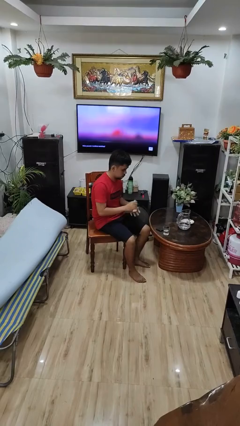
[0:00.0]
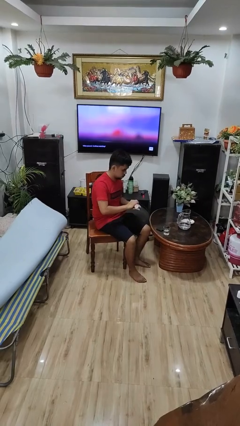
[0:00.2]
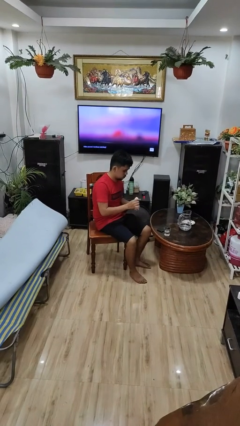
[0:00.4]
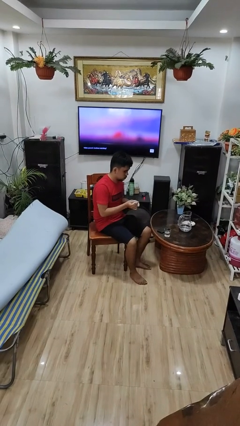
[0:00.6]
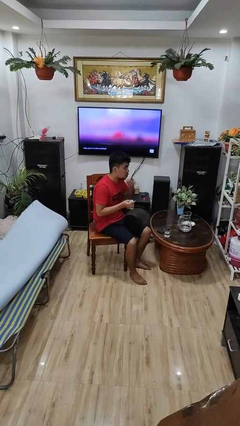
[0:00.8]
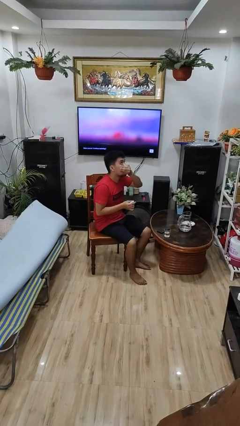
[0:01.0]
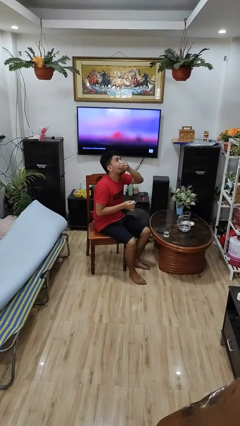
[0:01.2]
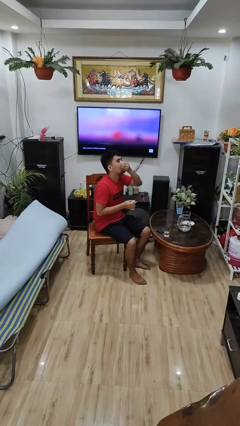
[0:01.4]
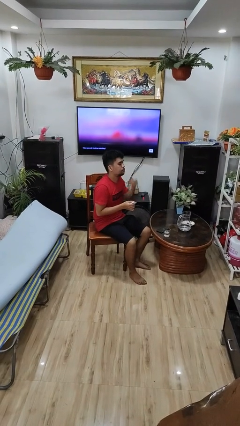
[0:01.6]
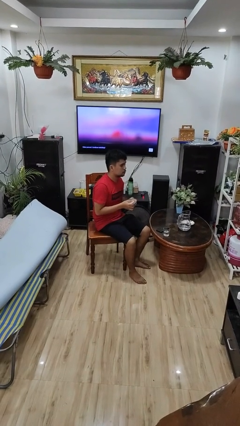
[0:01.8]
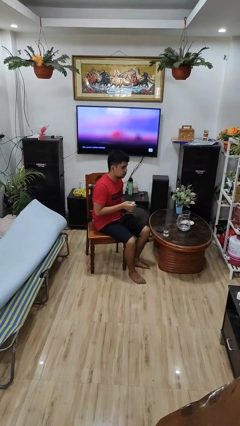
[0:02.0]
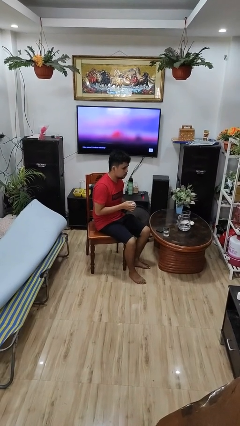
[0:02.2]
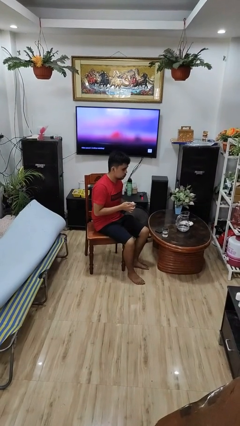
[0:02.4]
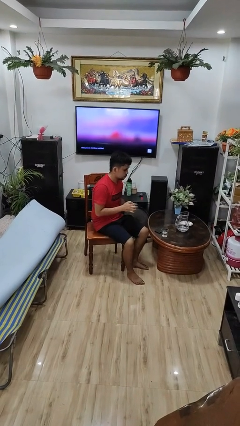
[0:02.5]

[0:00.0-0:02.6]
person takes medicine pills

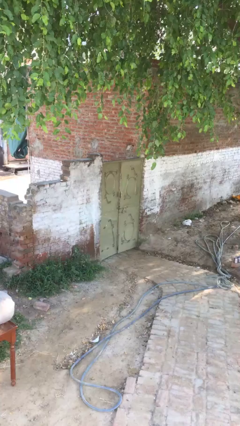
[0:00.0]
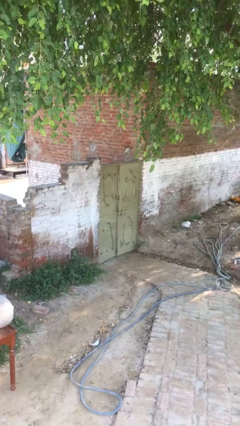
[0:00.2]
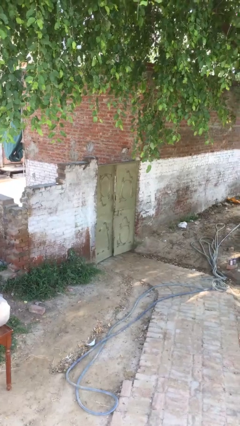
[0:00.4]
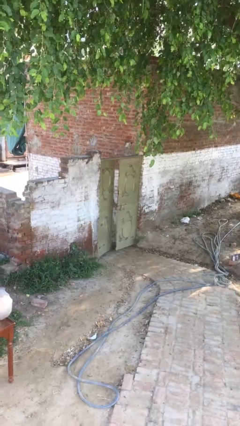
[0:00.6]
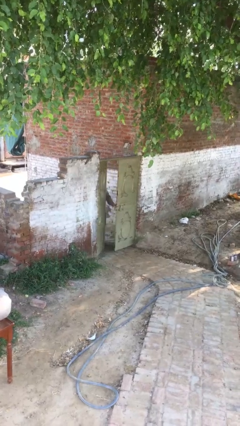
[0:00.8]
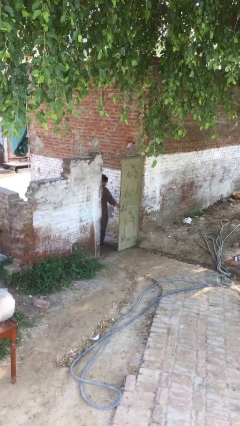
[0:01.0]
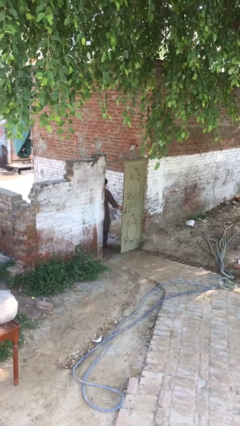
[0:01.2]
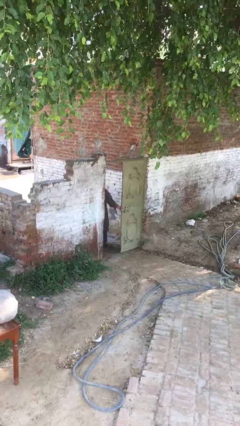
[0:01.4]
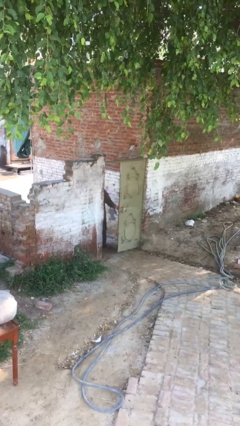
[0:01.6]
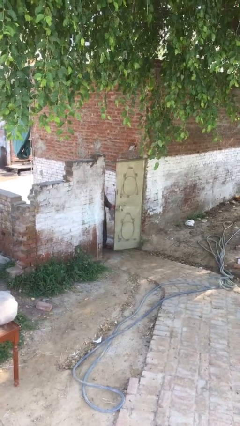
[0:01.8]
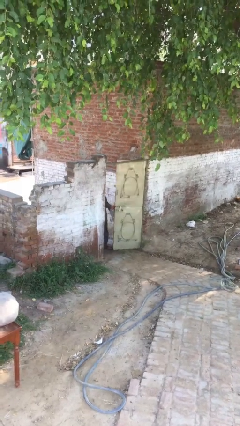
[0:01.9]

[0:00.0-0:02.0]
person opens facility door

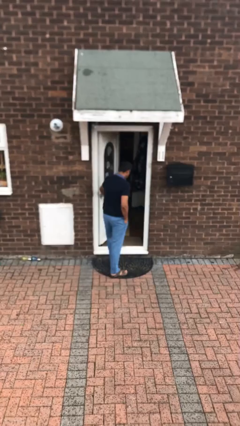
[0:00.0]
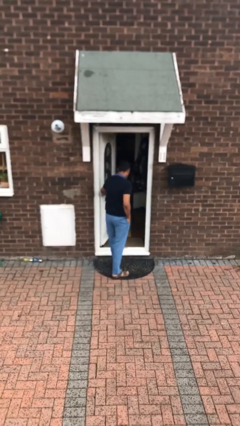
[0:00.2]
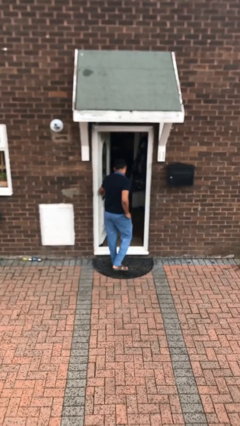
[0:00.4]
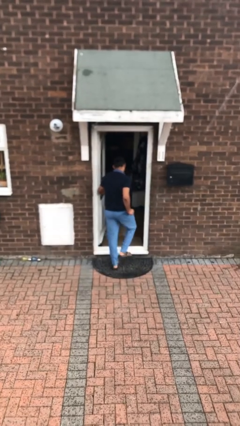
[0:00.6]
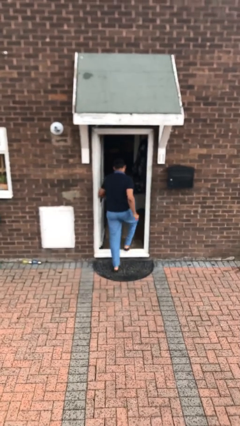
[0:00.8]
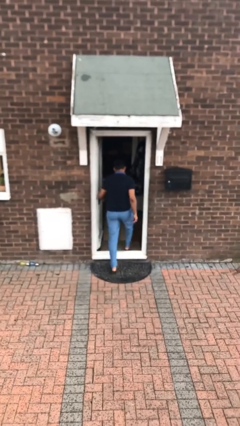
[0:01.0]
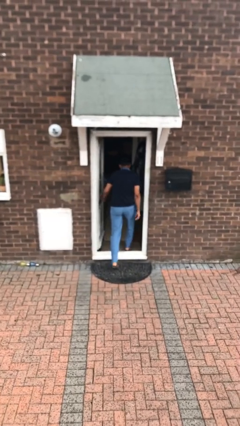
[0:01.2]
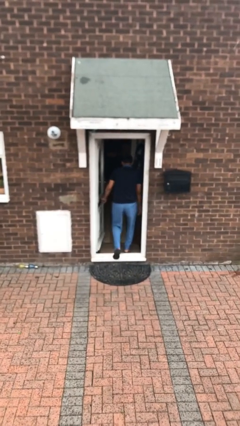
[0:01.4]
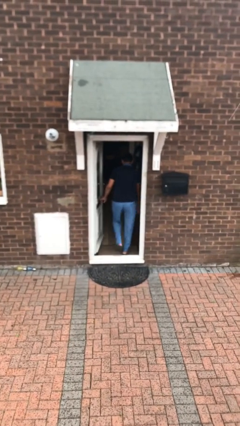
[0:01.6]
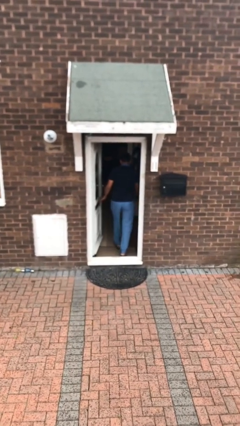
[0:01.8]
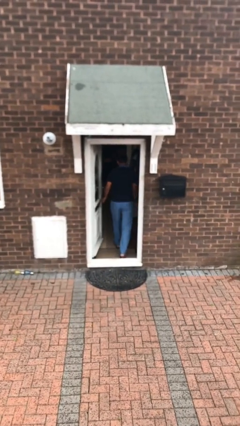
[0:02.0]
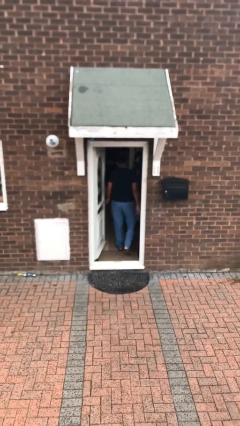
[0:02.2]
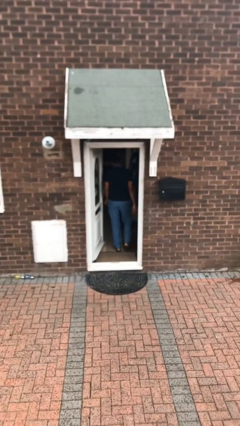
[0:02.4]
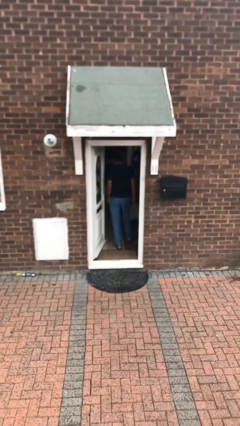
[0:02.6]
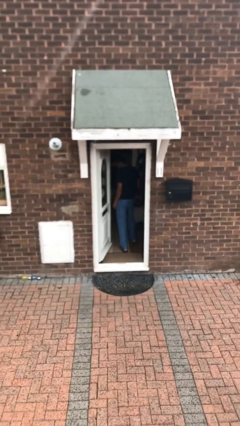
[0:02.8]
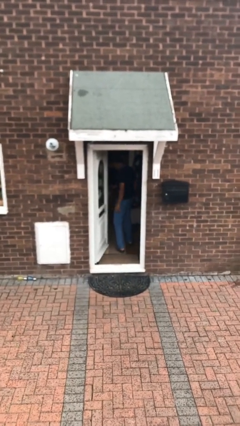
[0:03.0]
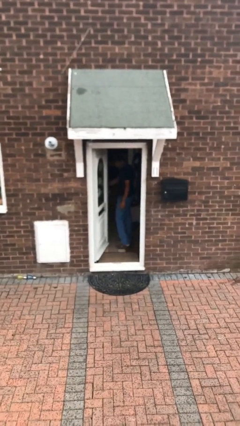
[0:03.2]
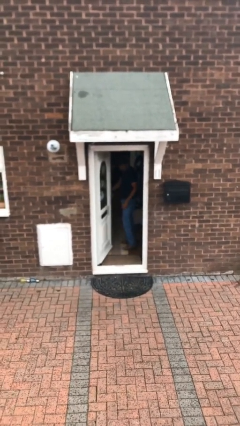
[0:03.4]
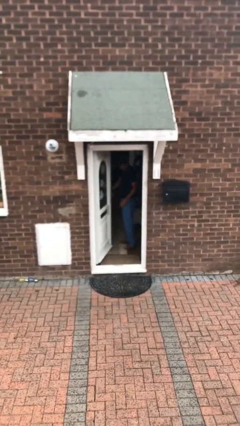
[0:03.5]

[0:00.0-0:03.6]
person exits scene through structure

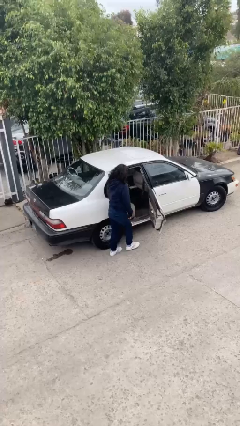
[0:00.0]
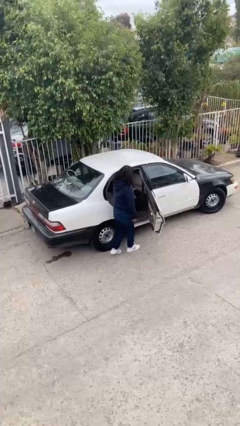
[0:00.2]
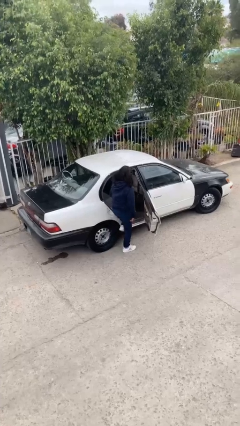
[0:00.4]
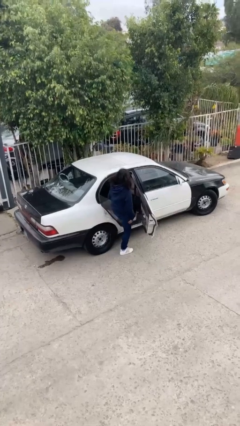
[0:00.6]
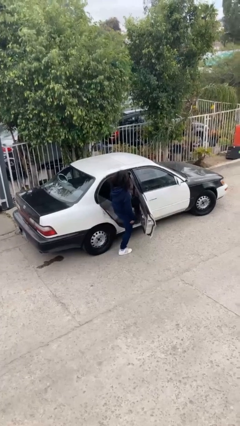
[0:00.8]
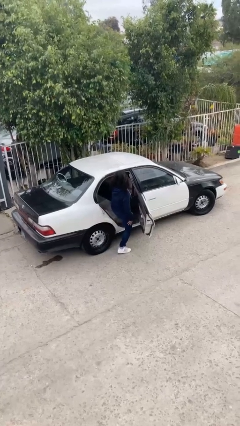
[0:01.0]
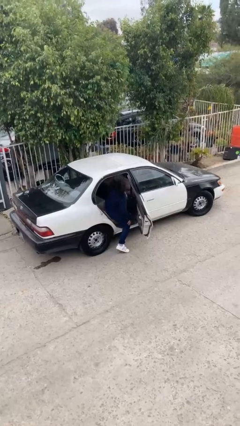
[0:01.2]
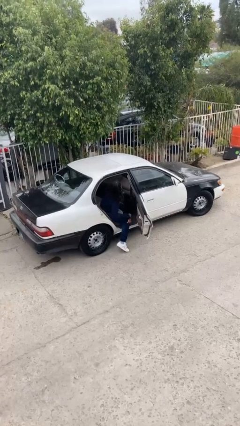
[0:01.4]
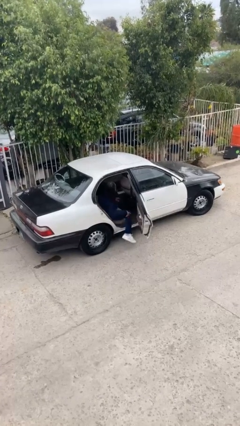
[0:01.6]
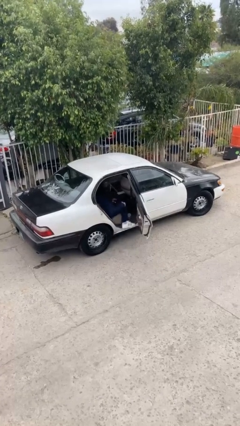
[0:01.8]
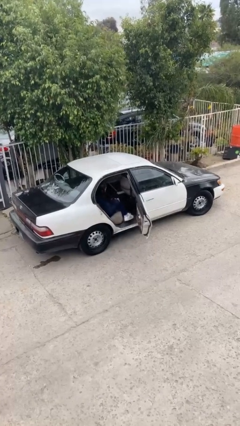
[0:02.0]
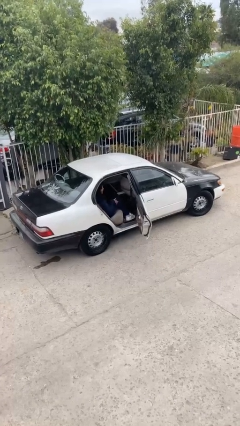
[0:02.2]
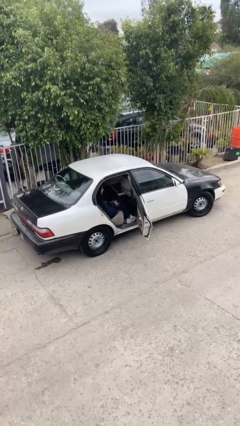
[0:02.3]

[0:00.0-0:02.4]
person enters car

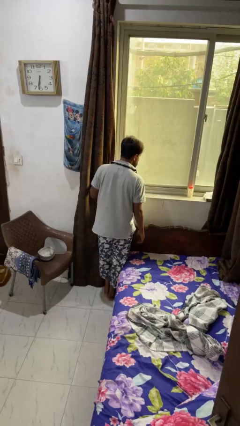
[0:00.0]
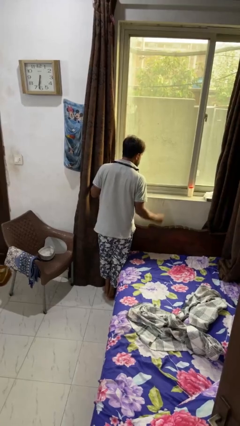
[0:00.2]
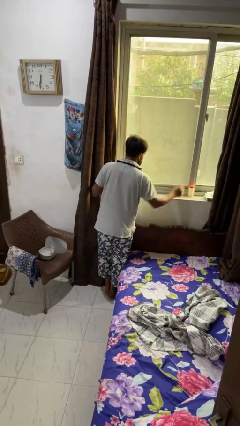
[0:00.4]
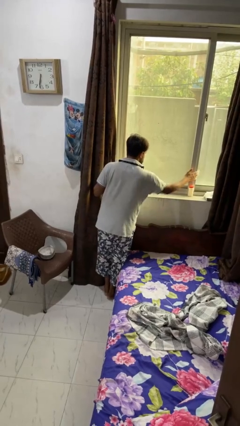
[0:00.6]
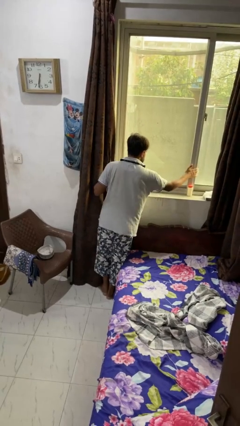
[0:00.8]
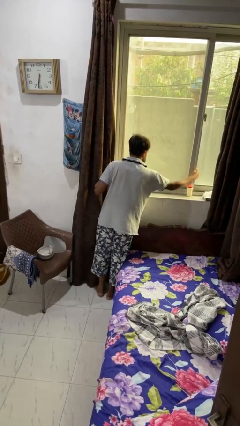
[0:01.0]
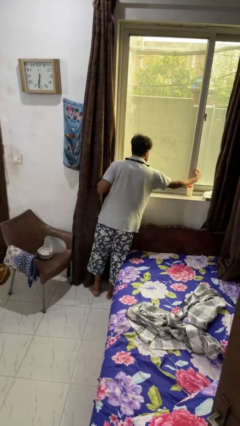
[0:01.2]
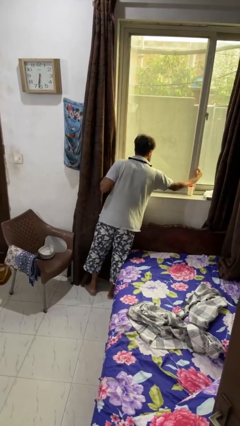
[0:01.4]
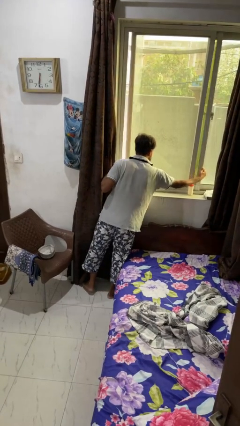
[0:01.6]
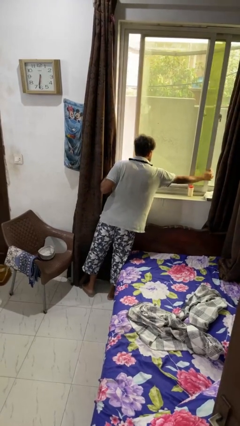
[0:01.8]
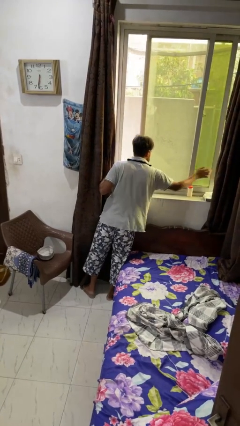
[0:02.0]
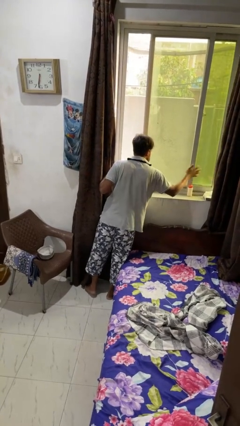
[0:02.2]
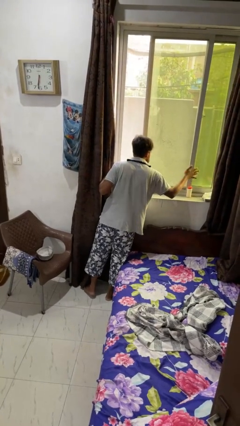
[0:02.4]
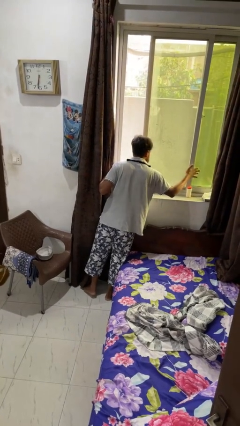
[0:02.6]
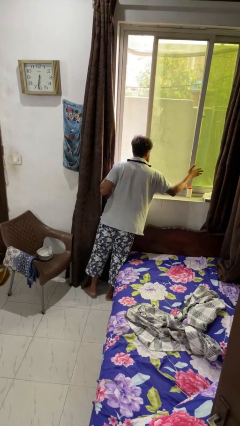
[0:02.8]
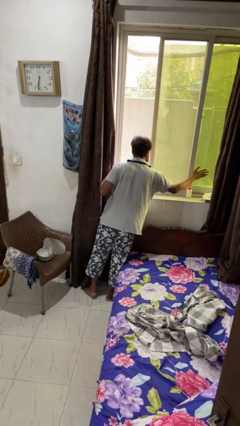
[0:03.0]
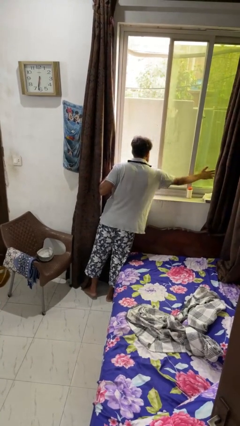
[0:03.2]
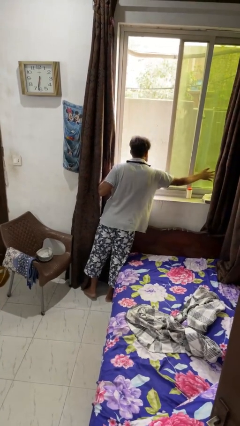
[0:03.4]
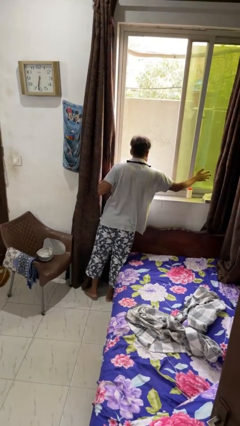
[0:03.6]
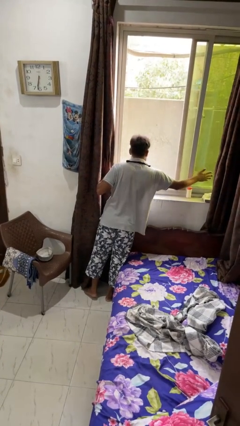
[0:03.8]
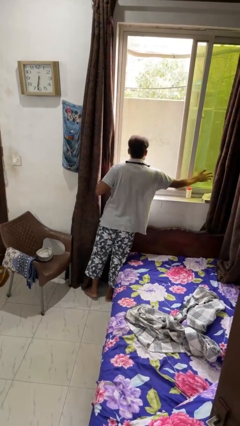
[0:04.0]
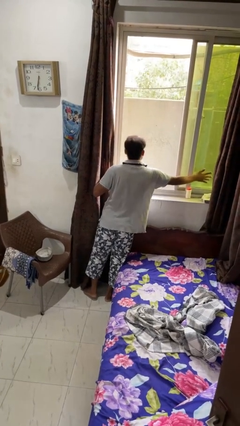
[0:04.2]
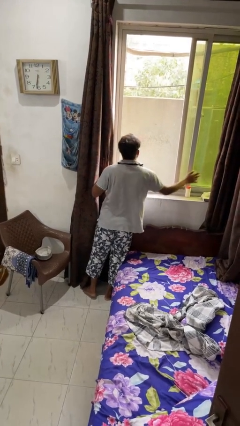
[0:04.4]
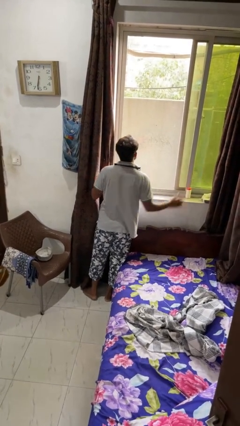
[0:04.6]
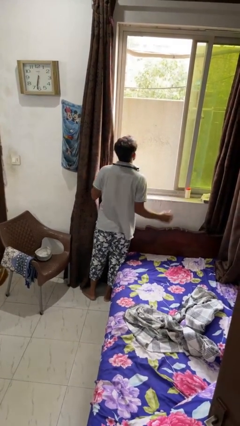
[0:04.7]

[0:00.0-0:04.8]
person opens home window

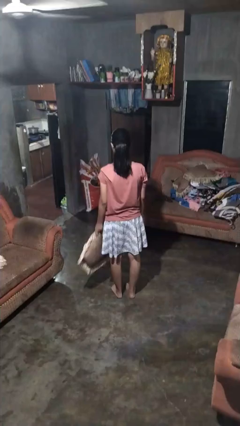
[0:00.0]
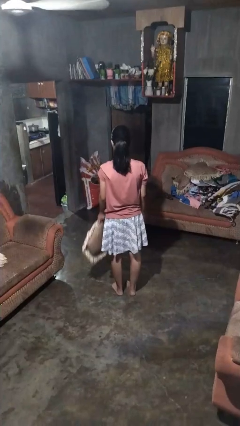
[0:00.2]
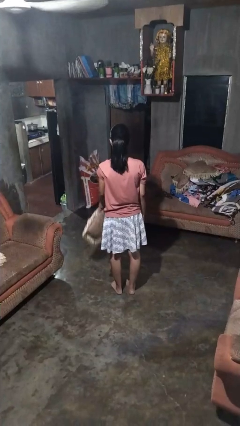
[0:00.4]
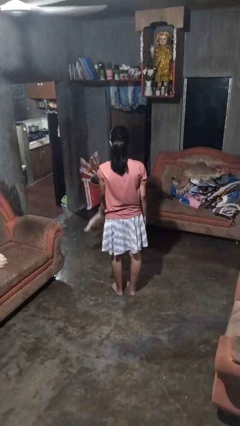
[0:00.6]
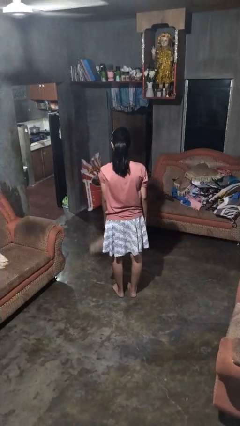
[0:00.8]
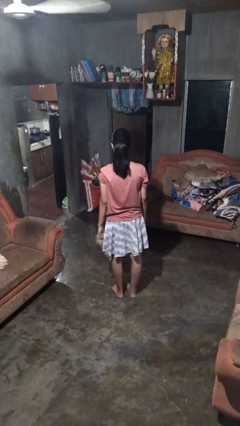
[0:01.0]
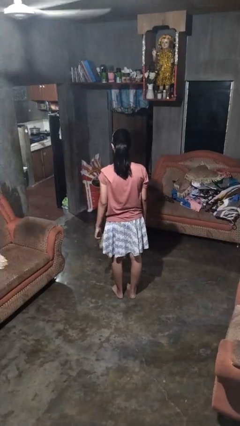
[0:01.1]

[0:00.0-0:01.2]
person throws object to ground

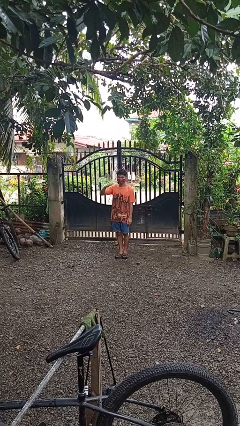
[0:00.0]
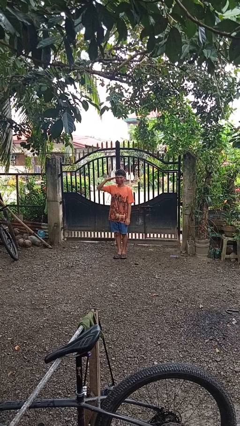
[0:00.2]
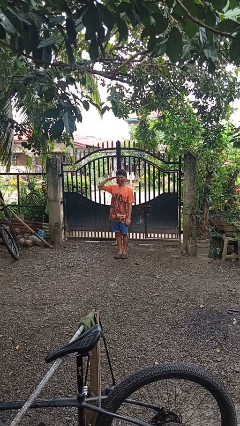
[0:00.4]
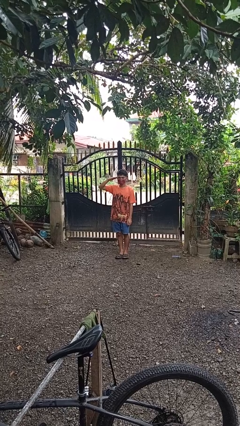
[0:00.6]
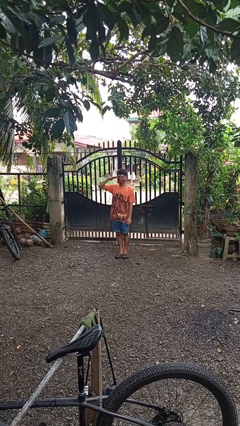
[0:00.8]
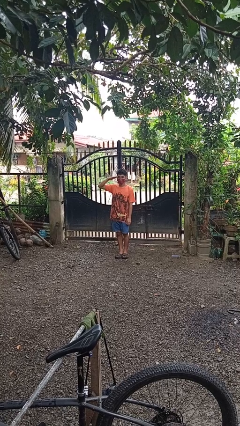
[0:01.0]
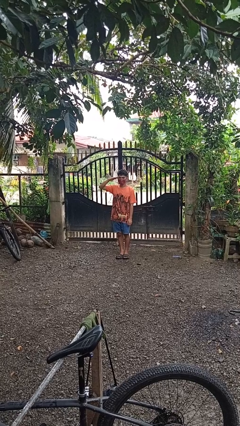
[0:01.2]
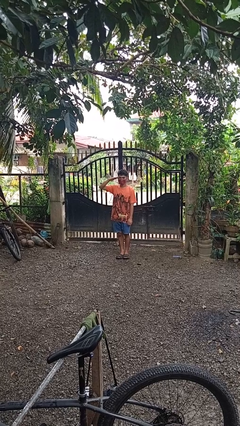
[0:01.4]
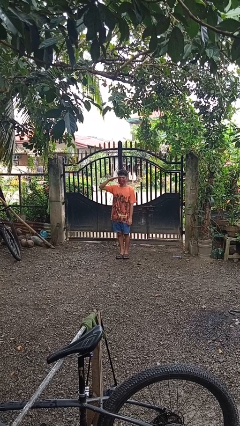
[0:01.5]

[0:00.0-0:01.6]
person salutes
